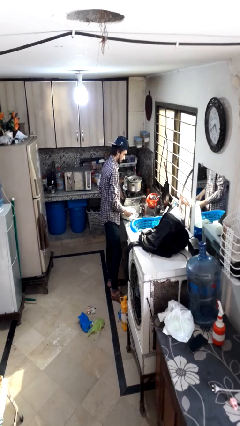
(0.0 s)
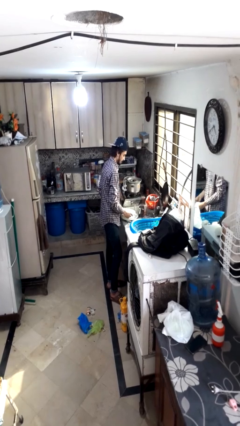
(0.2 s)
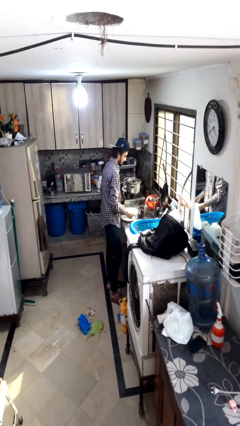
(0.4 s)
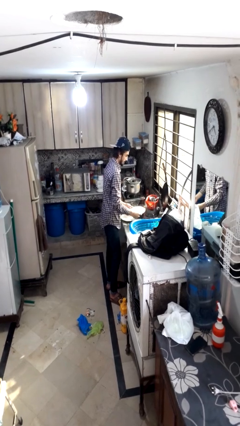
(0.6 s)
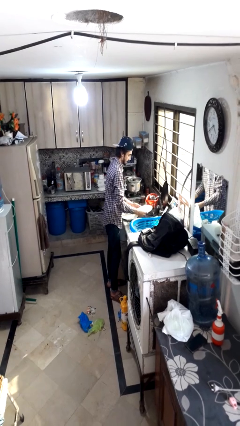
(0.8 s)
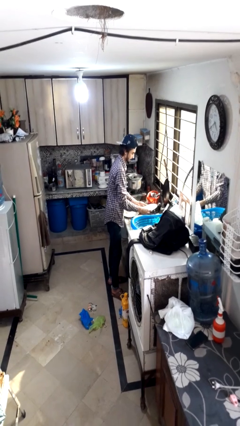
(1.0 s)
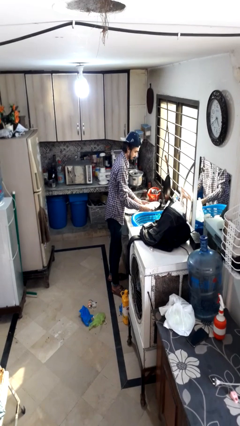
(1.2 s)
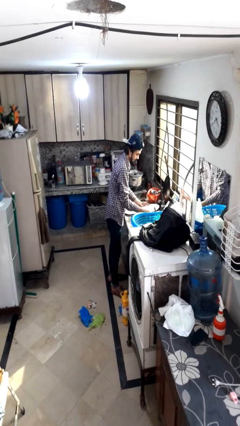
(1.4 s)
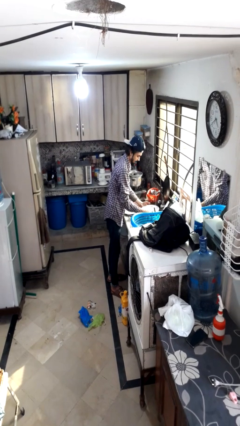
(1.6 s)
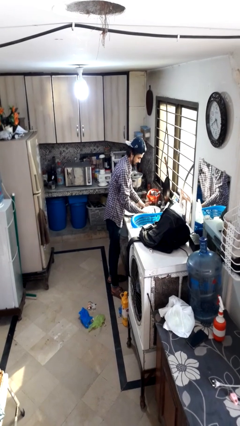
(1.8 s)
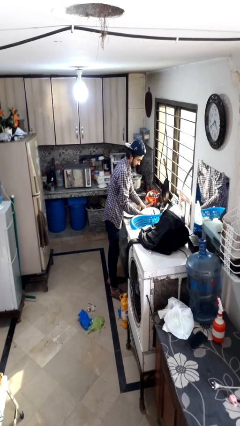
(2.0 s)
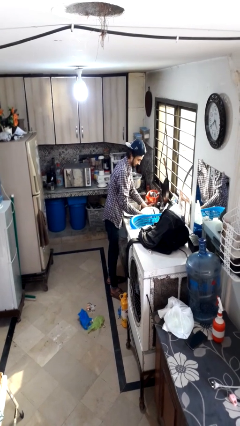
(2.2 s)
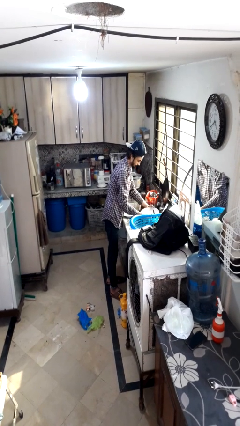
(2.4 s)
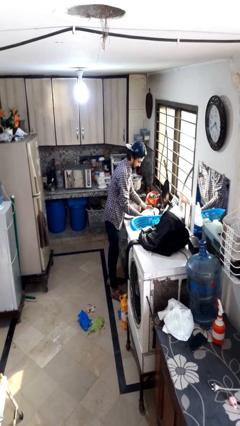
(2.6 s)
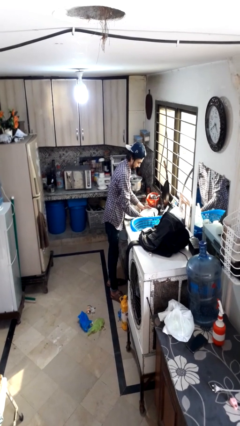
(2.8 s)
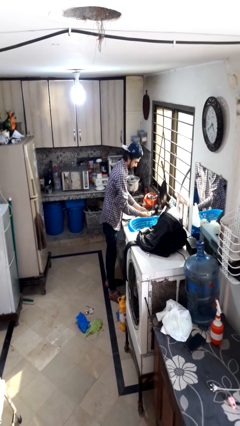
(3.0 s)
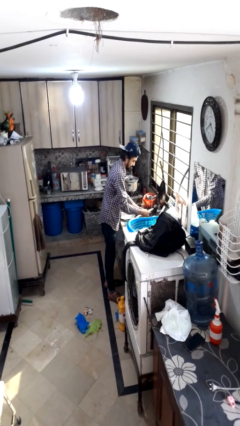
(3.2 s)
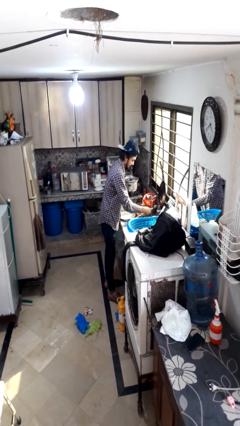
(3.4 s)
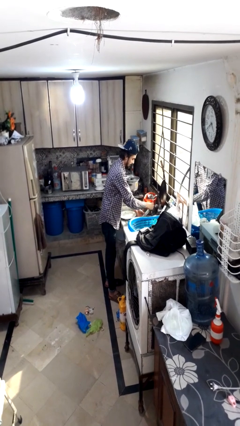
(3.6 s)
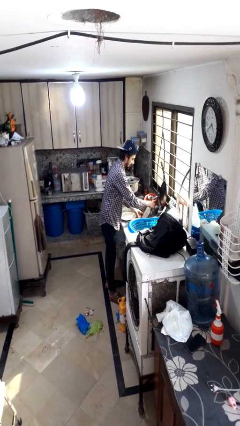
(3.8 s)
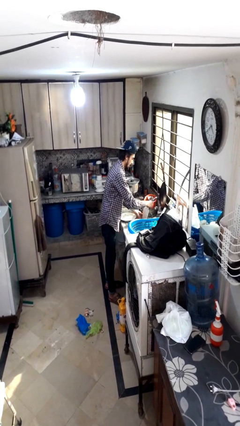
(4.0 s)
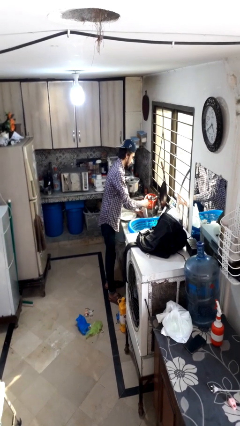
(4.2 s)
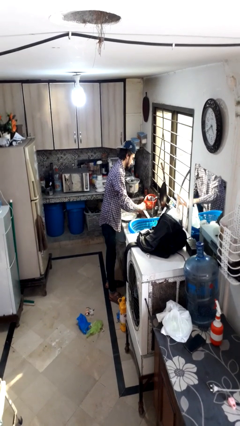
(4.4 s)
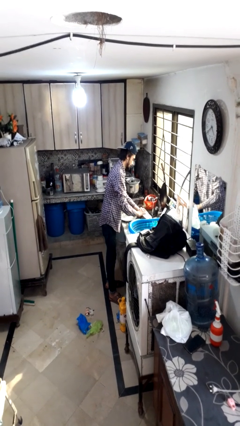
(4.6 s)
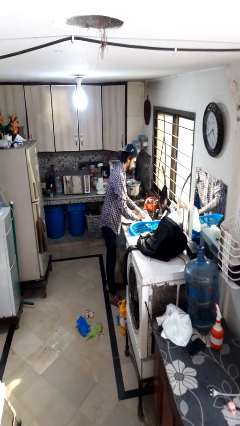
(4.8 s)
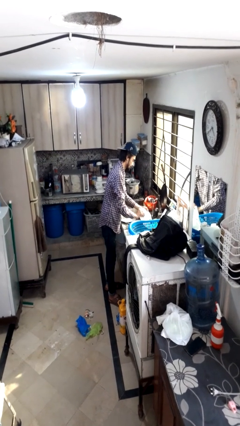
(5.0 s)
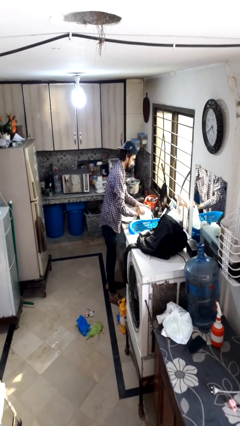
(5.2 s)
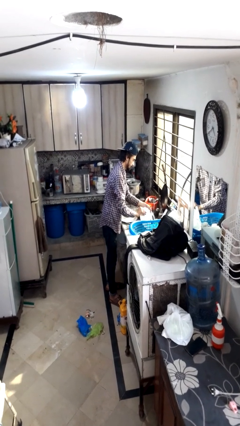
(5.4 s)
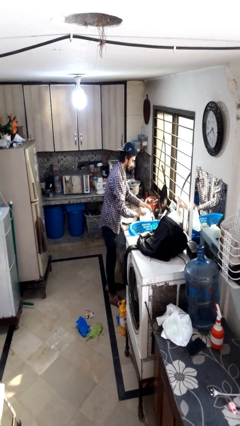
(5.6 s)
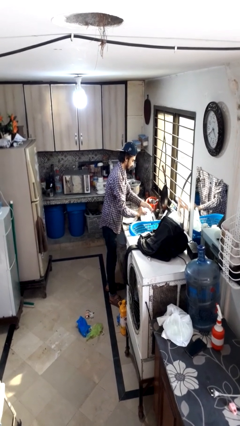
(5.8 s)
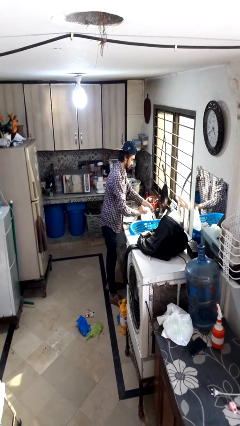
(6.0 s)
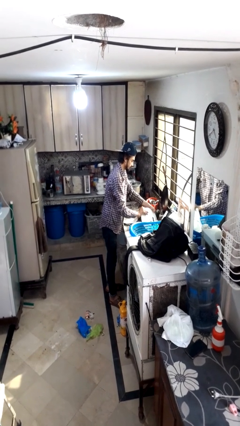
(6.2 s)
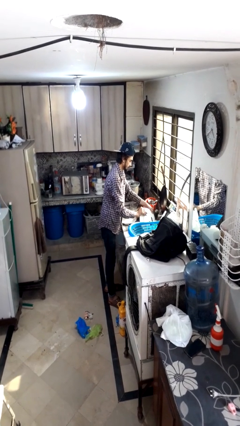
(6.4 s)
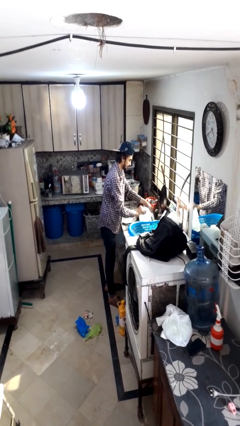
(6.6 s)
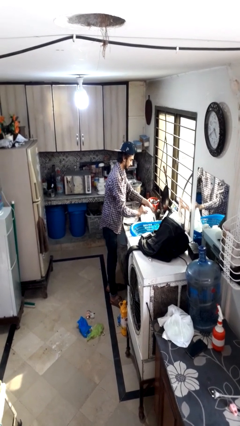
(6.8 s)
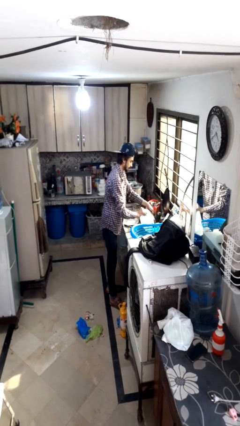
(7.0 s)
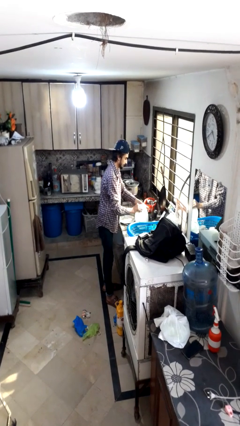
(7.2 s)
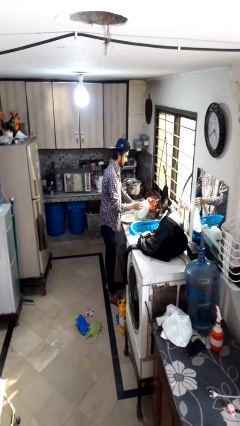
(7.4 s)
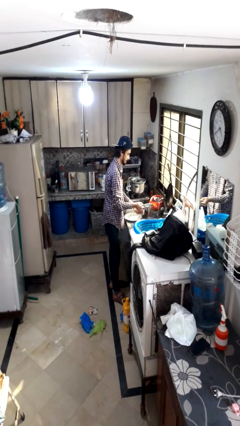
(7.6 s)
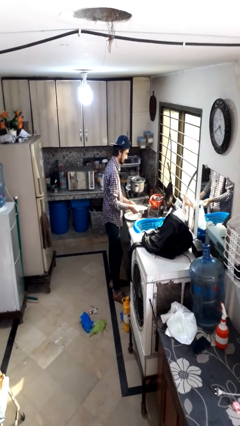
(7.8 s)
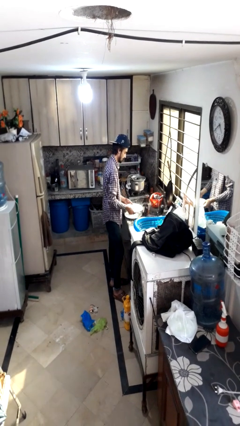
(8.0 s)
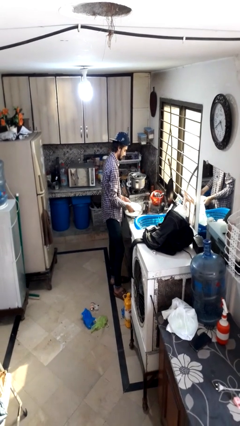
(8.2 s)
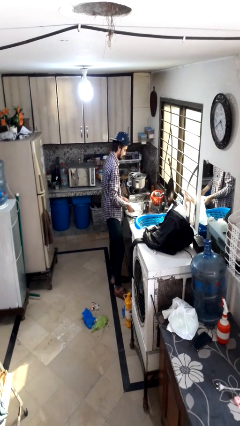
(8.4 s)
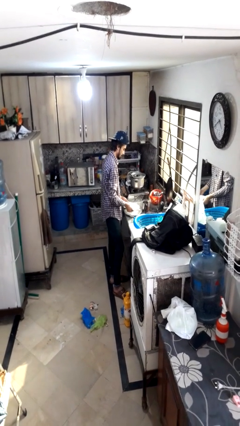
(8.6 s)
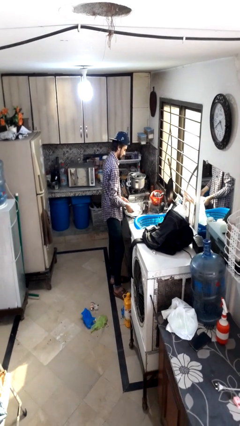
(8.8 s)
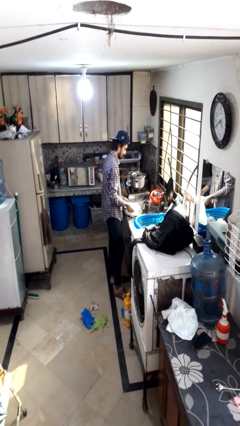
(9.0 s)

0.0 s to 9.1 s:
person washes dish

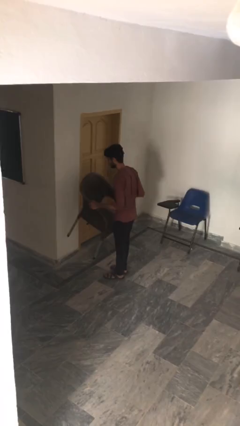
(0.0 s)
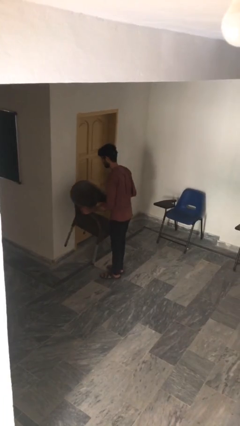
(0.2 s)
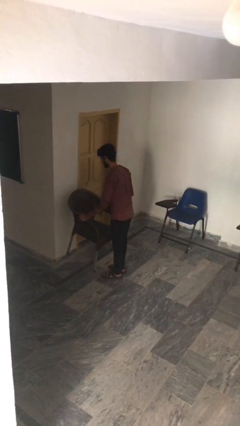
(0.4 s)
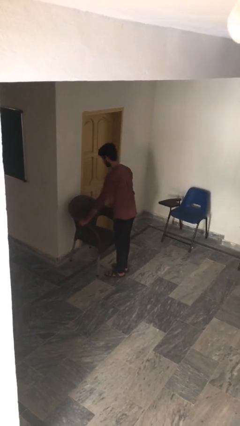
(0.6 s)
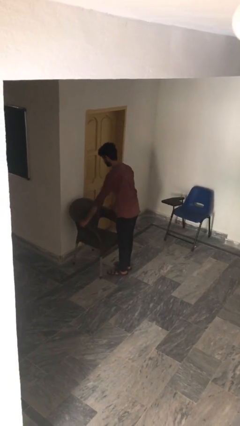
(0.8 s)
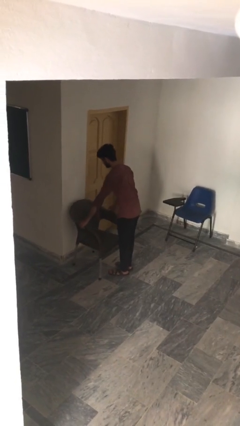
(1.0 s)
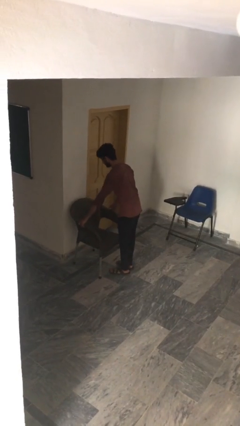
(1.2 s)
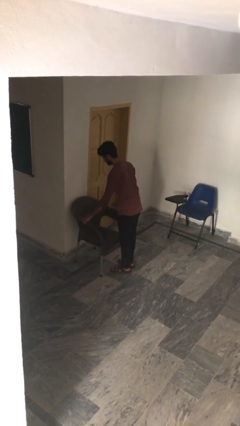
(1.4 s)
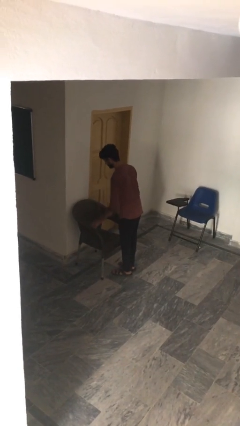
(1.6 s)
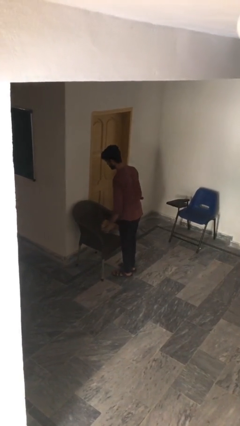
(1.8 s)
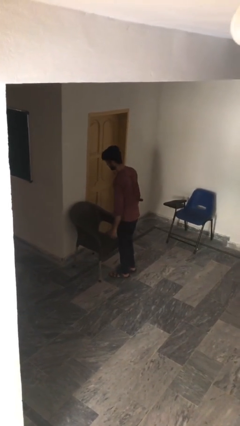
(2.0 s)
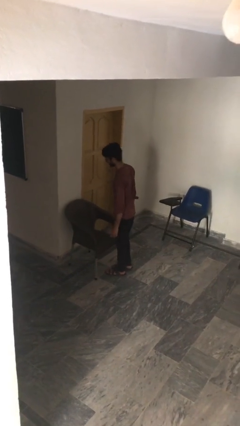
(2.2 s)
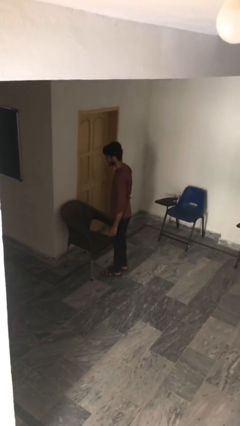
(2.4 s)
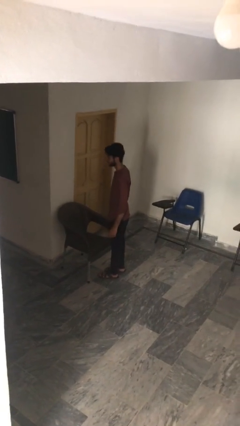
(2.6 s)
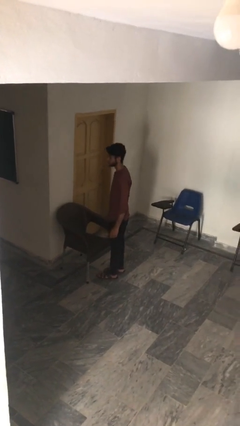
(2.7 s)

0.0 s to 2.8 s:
person puts down object on floor

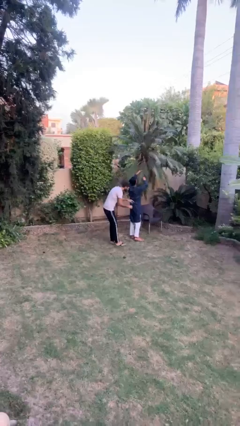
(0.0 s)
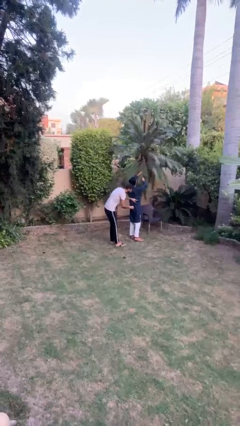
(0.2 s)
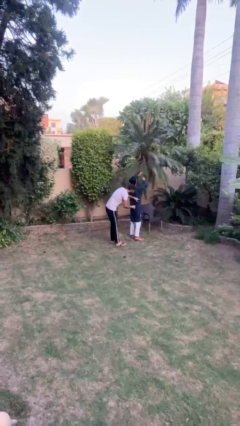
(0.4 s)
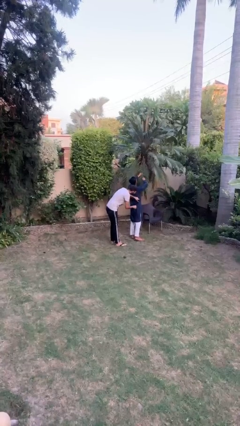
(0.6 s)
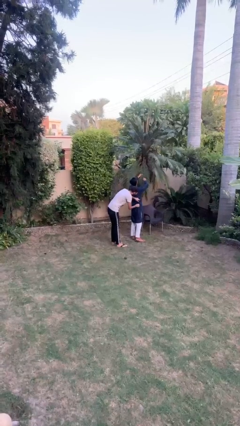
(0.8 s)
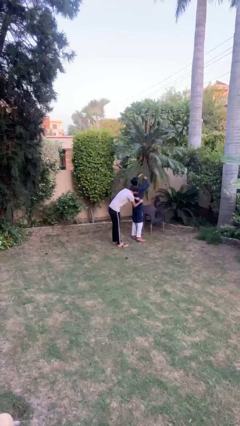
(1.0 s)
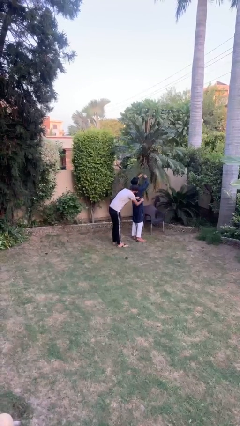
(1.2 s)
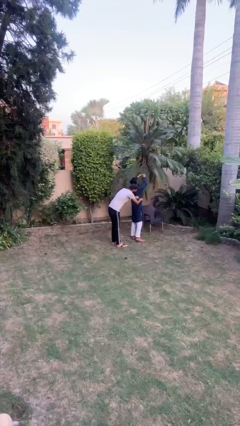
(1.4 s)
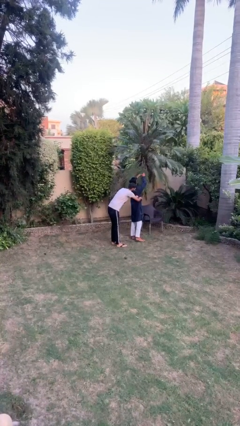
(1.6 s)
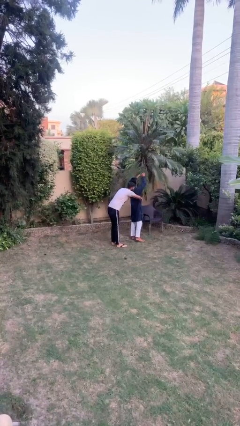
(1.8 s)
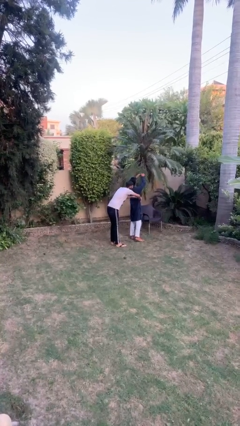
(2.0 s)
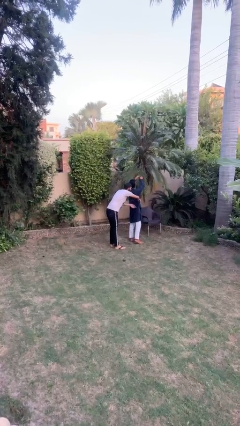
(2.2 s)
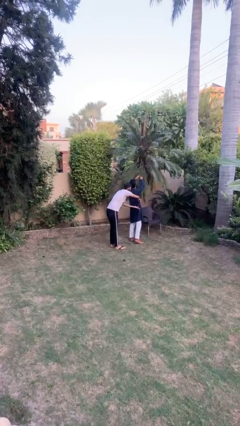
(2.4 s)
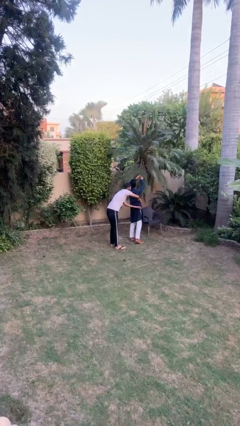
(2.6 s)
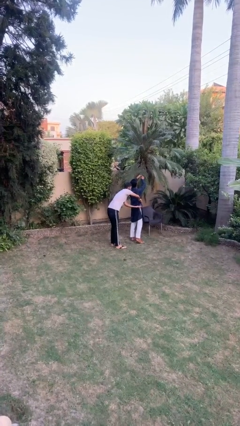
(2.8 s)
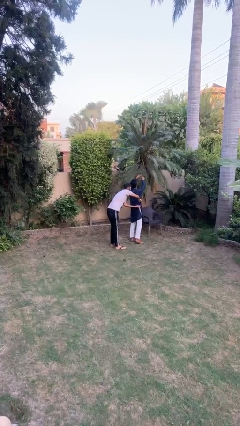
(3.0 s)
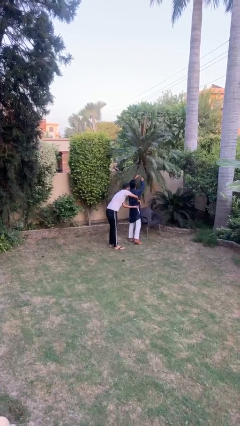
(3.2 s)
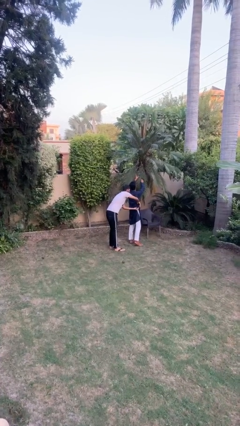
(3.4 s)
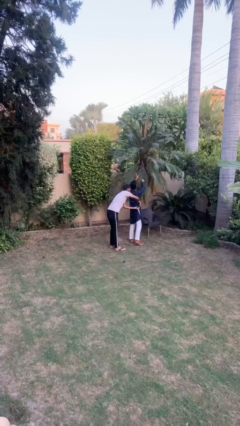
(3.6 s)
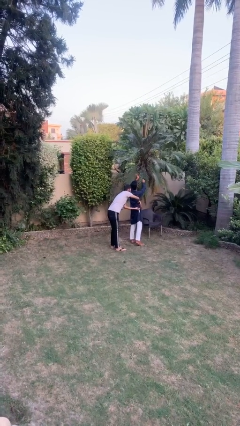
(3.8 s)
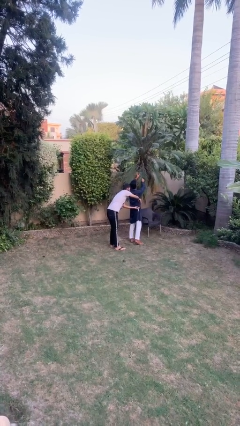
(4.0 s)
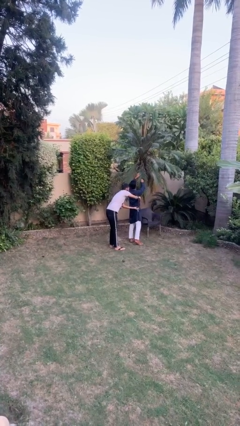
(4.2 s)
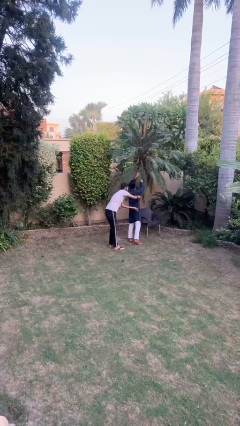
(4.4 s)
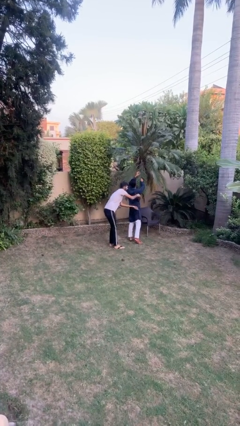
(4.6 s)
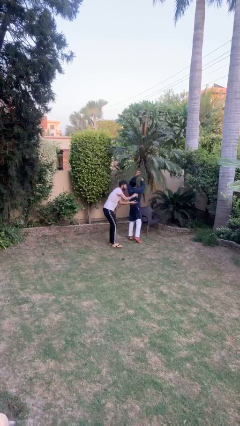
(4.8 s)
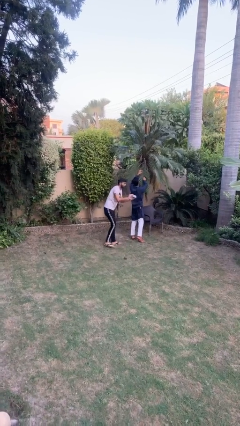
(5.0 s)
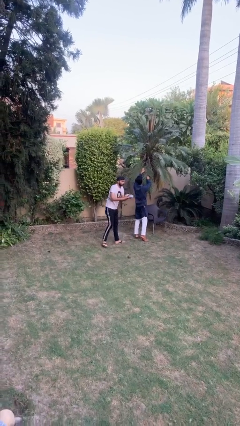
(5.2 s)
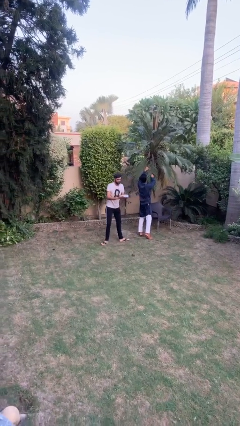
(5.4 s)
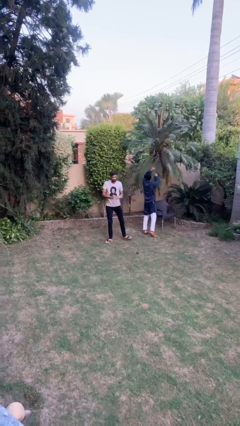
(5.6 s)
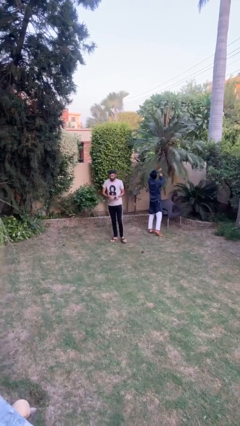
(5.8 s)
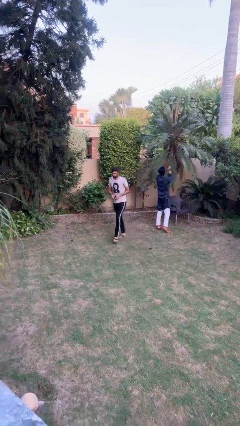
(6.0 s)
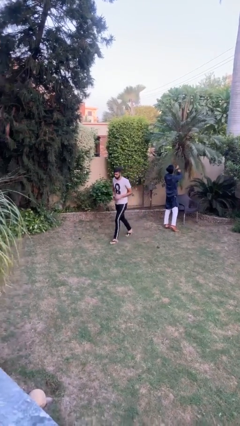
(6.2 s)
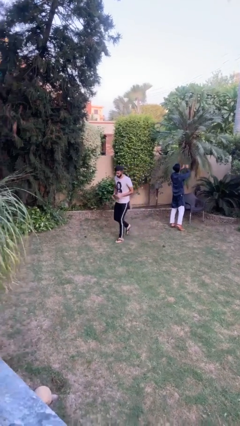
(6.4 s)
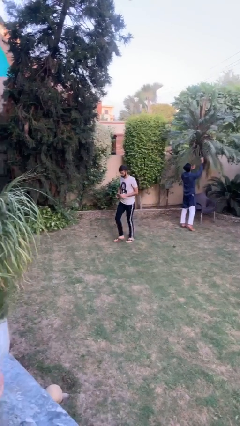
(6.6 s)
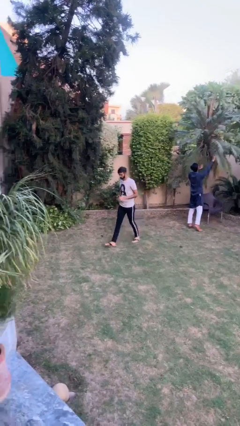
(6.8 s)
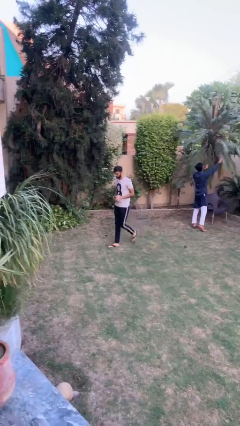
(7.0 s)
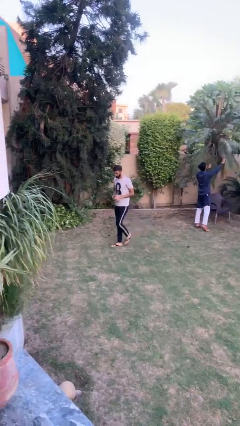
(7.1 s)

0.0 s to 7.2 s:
person steals object from person
